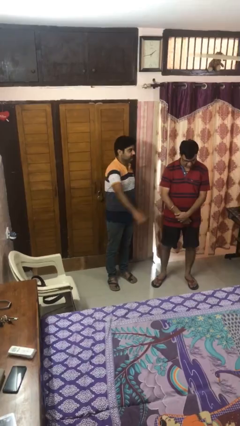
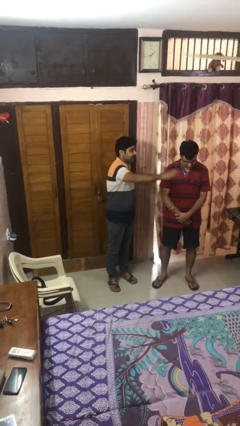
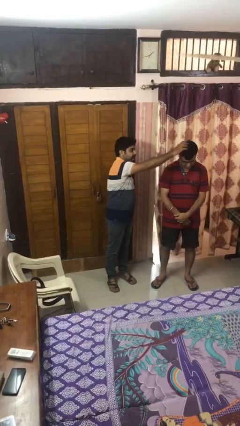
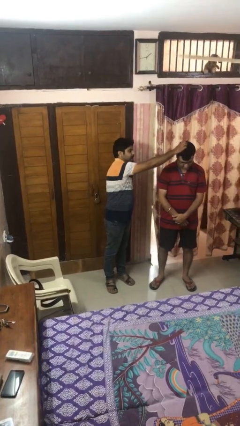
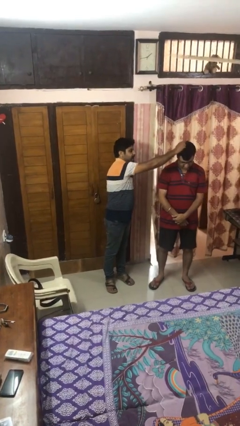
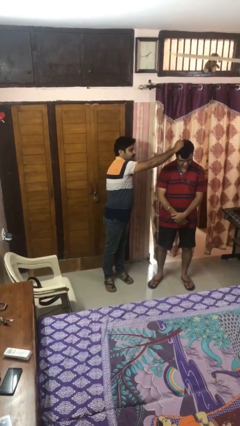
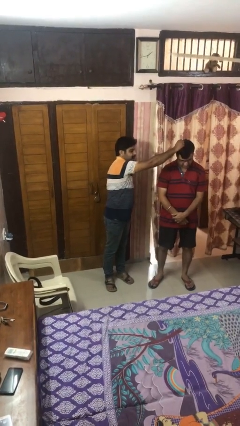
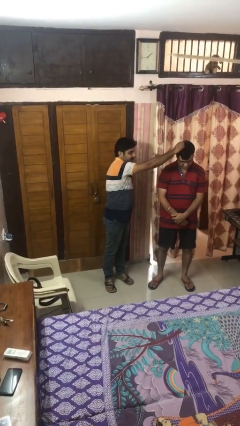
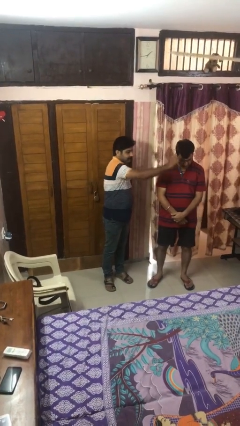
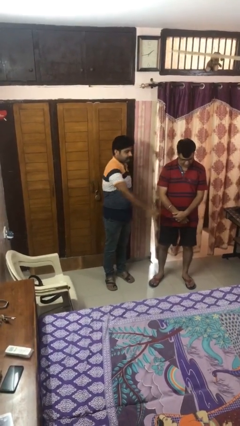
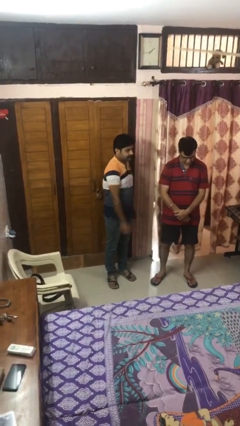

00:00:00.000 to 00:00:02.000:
person grabs person by hair

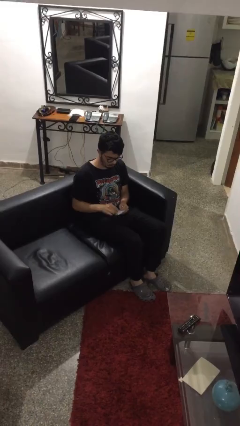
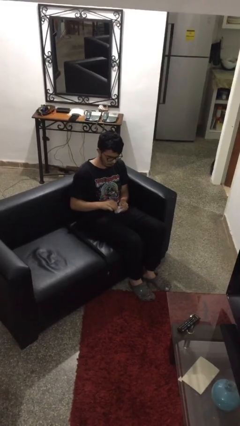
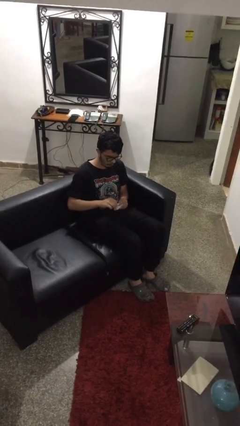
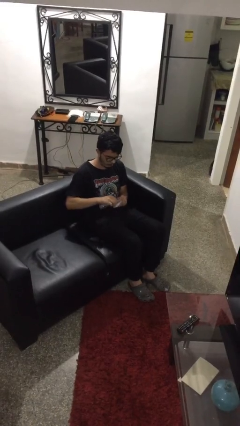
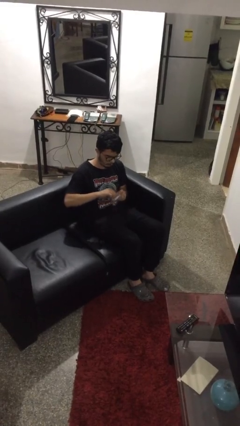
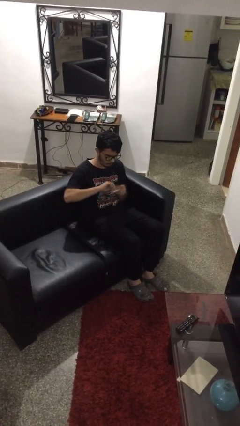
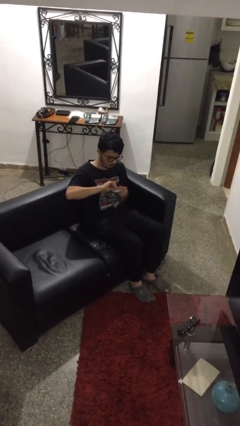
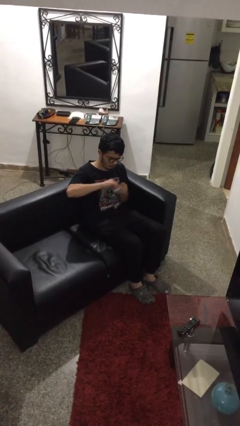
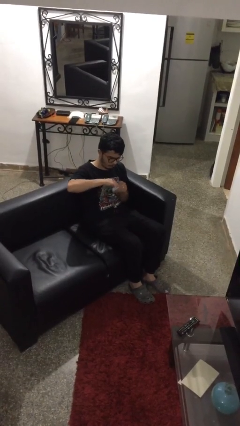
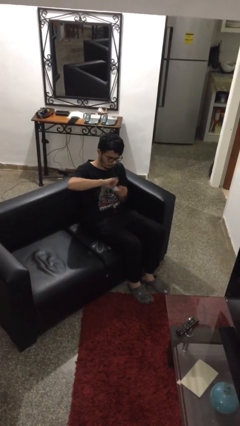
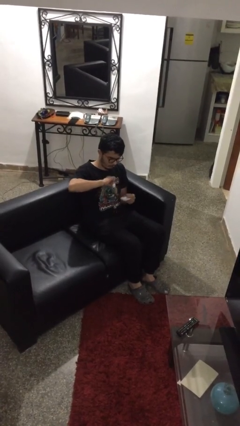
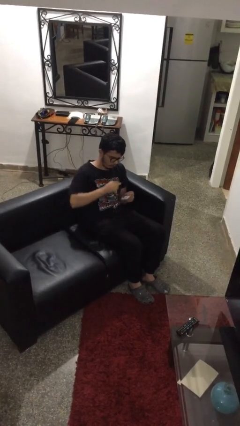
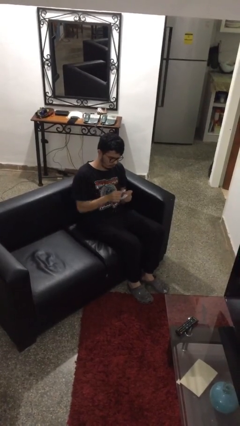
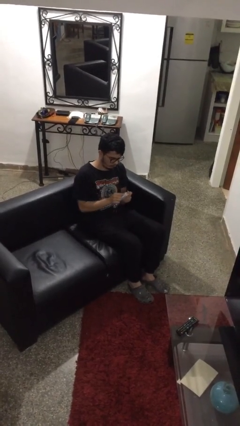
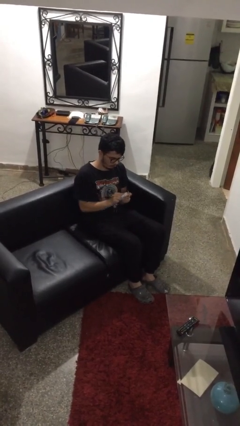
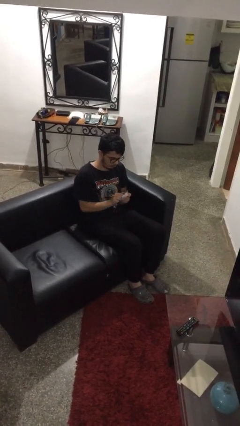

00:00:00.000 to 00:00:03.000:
person tears paper

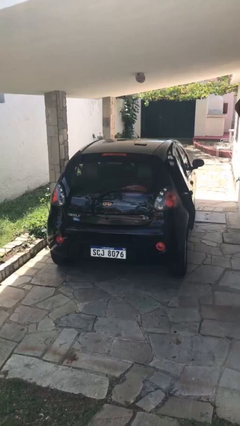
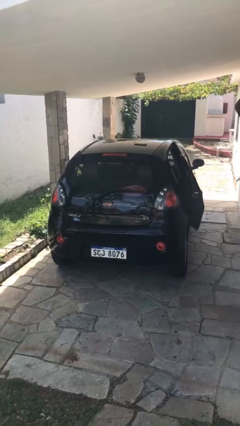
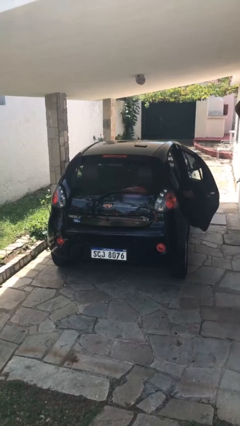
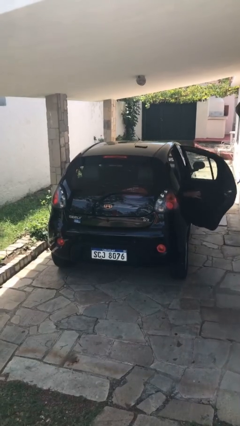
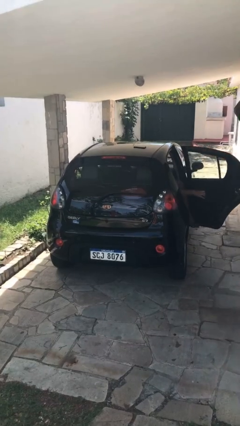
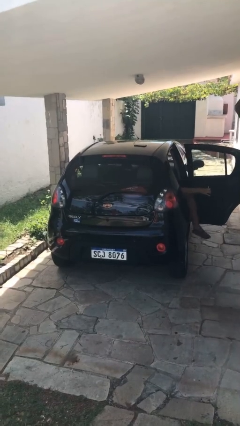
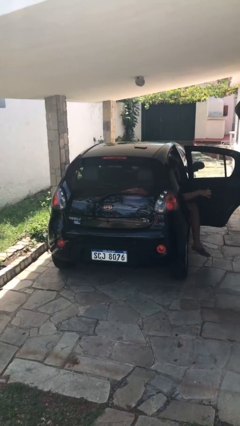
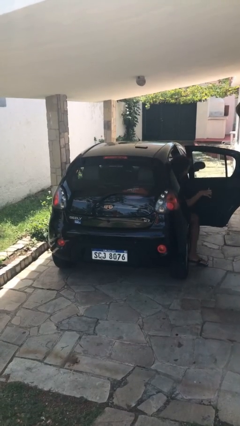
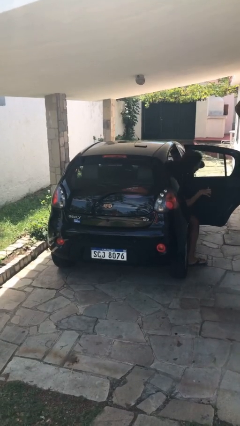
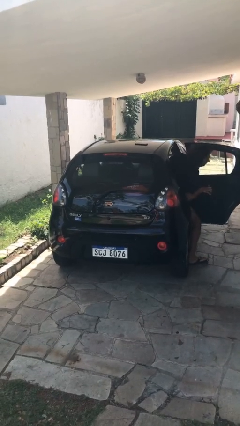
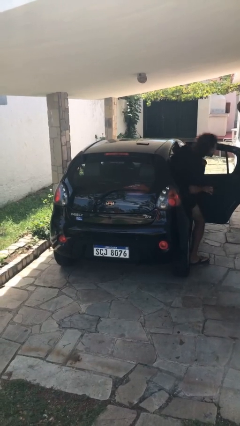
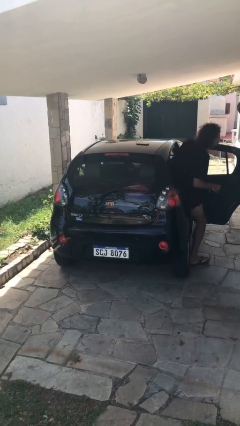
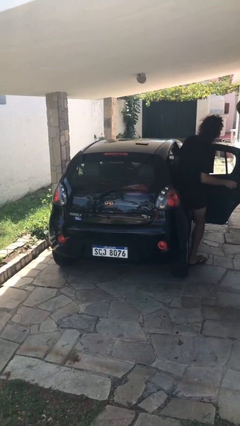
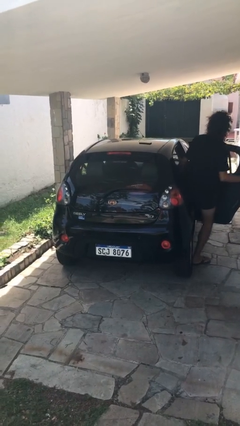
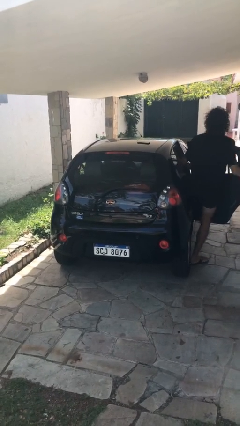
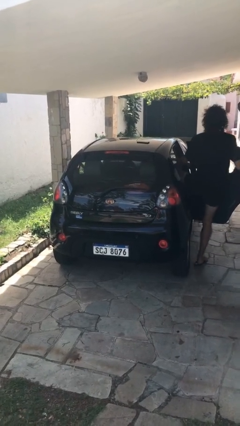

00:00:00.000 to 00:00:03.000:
car drops off person

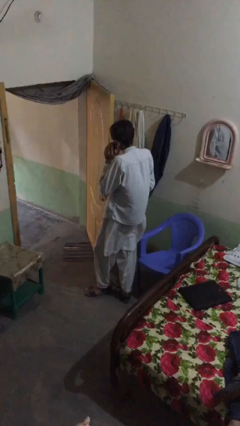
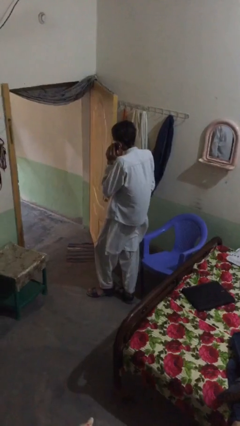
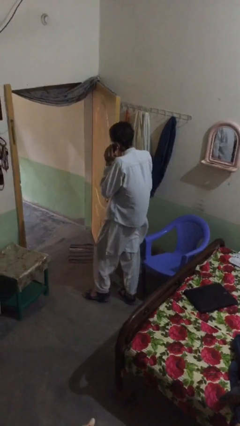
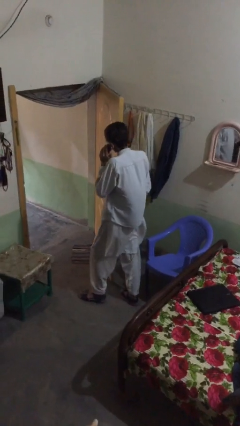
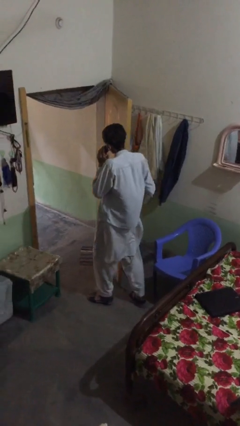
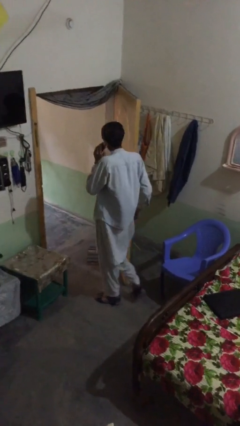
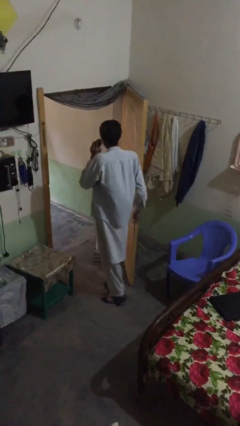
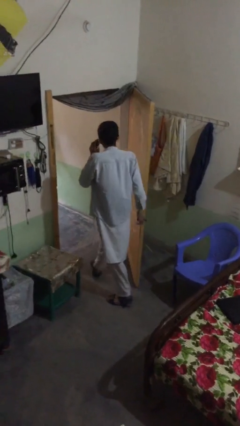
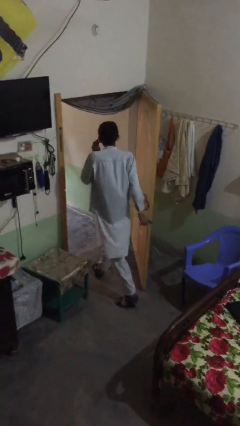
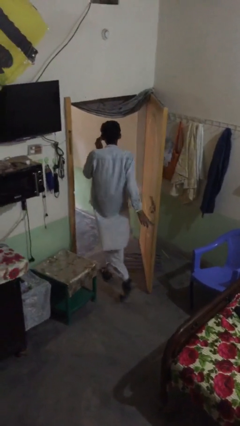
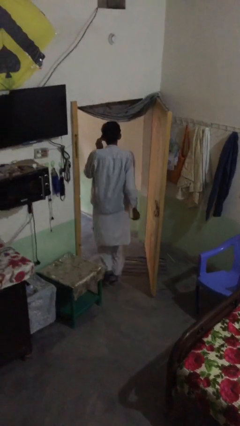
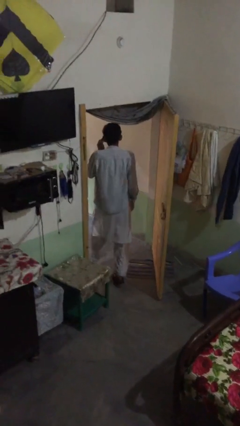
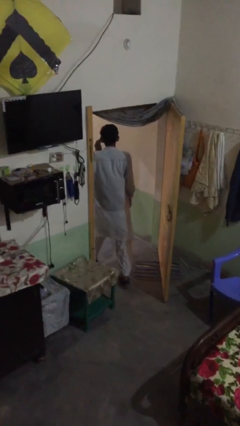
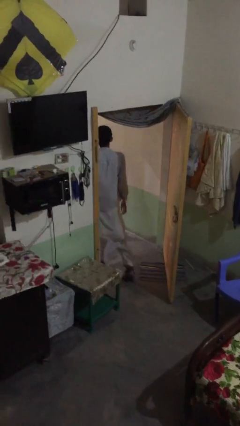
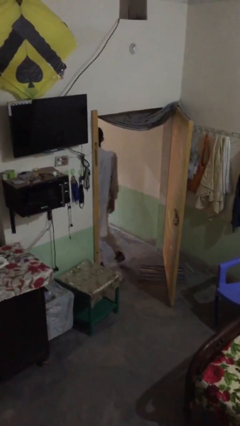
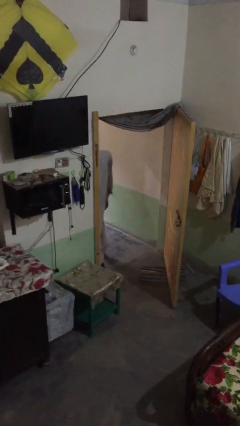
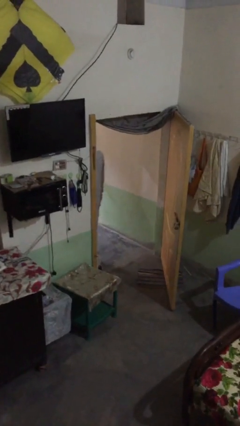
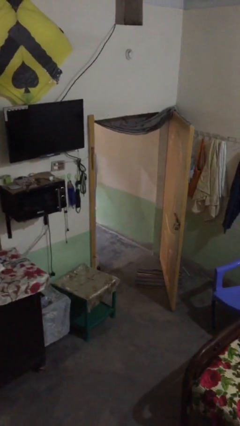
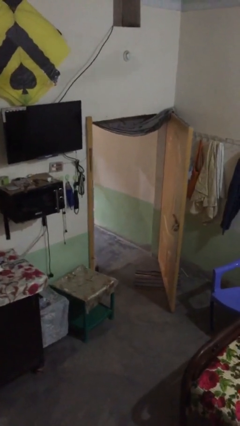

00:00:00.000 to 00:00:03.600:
person exits scene through structure

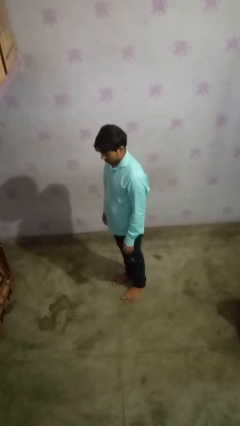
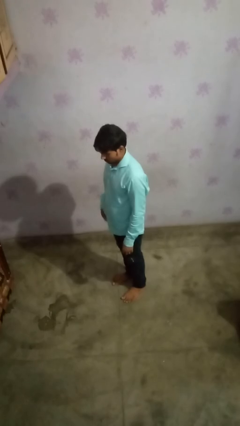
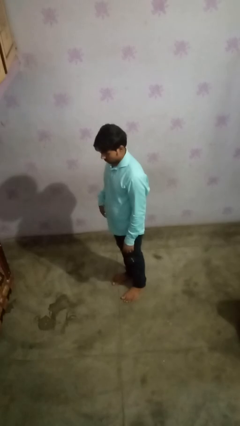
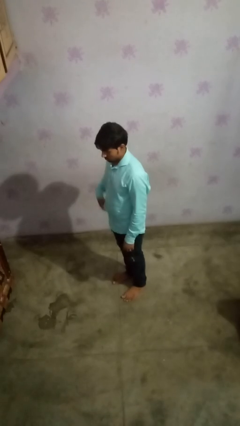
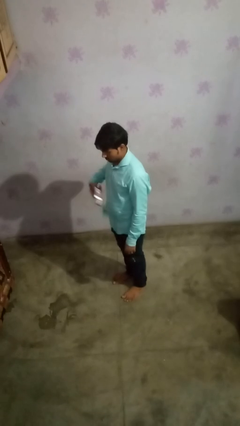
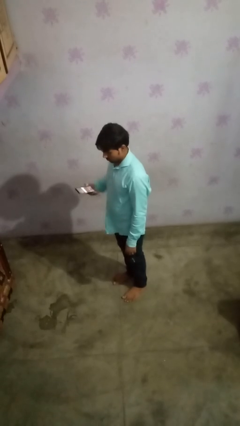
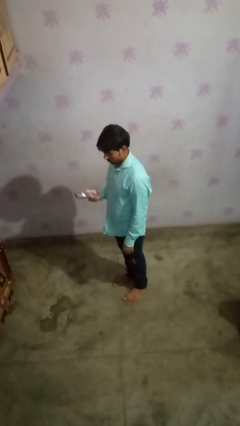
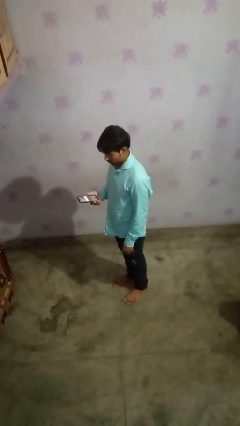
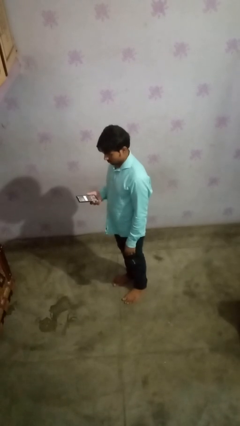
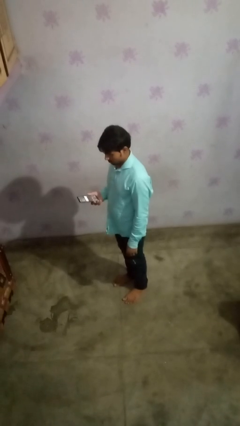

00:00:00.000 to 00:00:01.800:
person takes phone from pocket

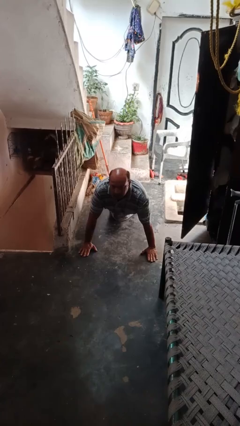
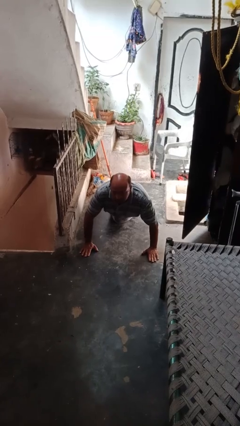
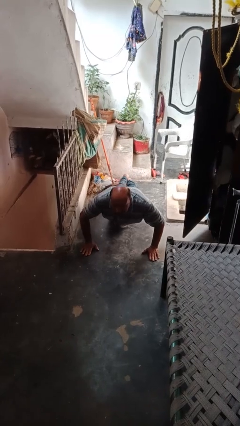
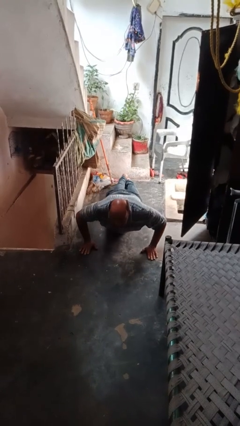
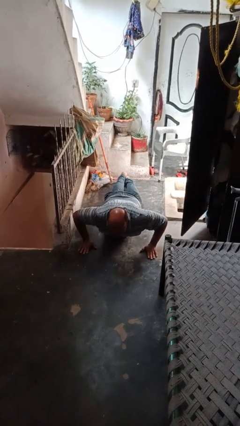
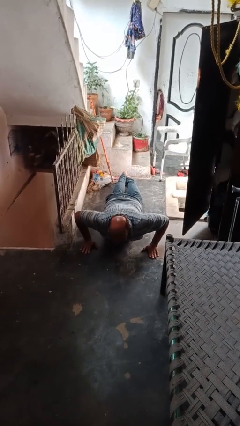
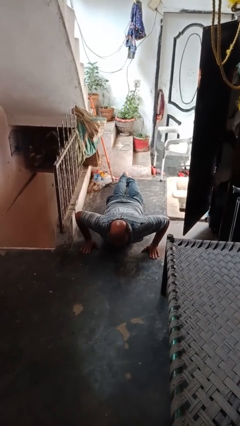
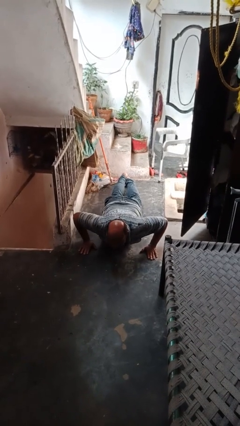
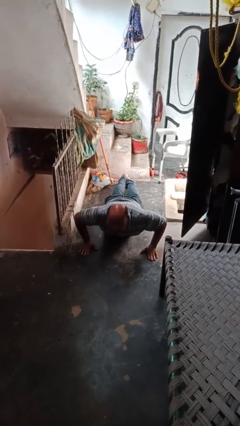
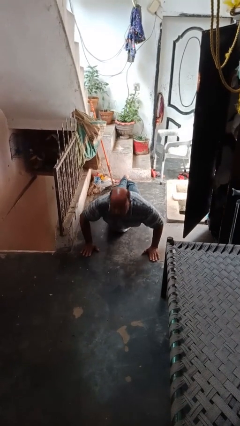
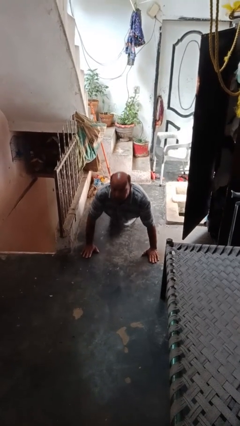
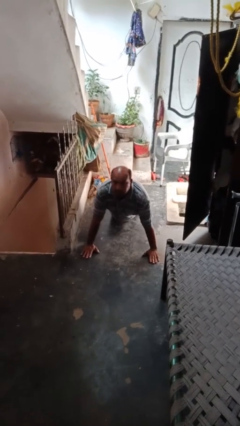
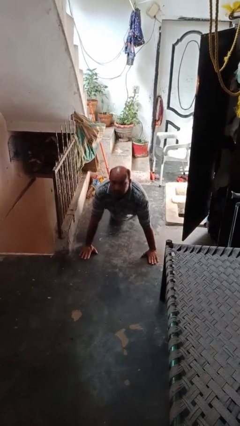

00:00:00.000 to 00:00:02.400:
person exercises with pushup

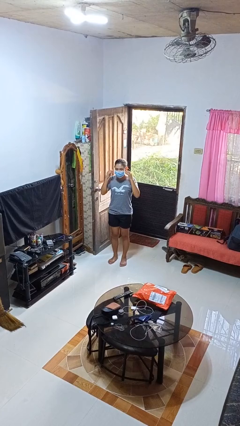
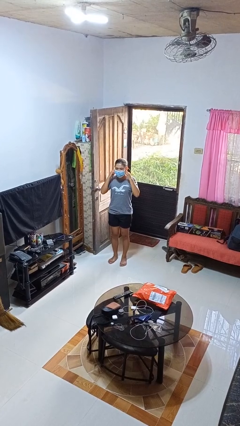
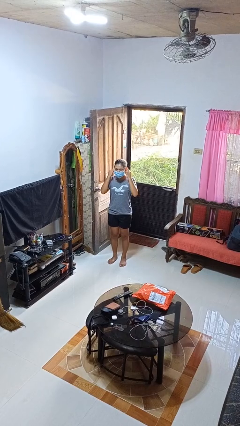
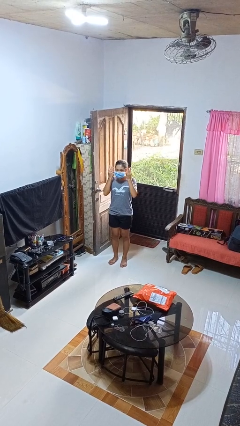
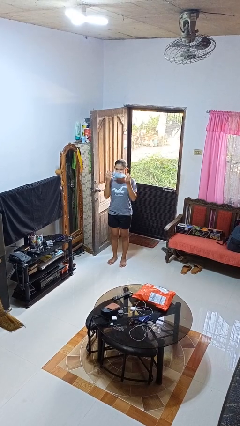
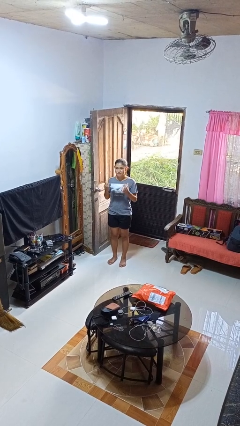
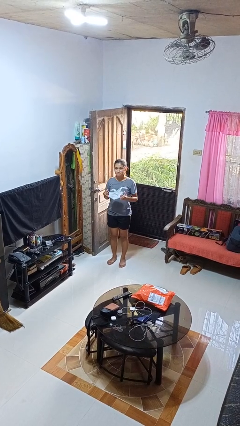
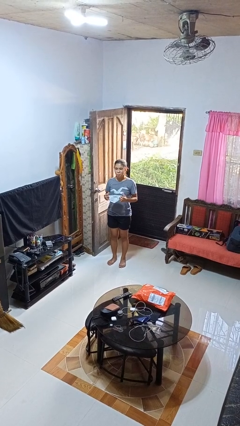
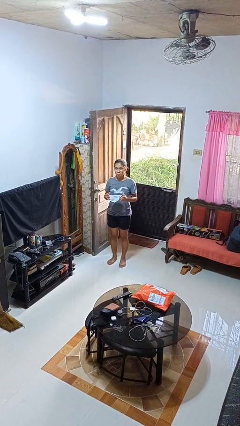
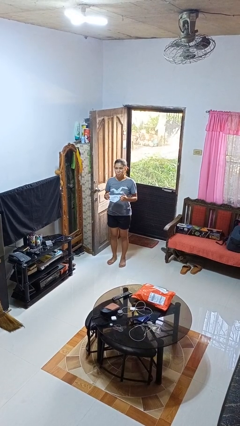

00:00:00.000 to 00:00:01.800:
person takes off facemask
